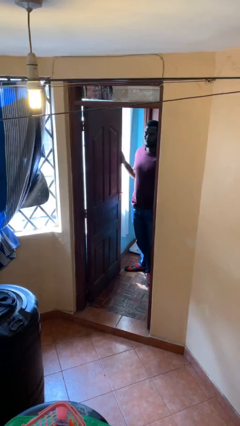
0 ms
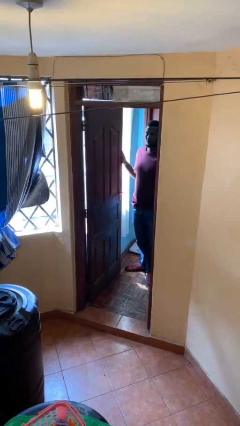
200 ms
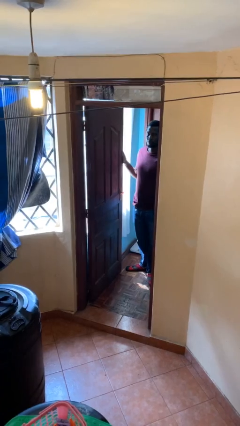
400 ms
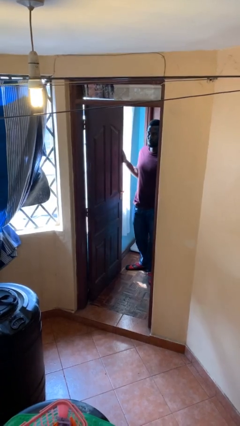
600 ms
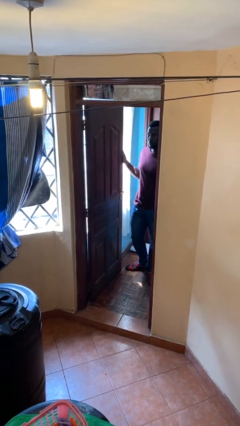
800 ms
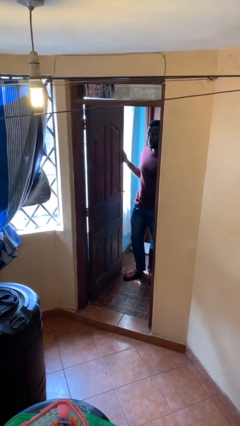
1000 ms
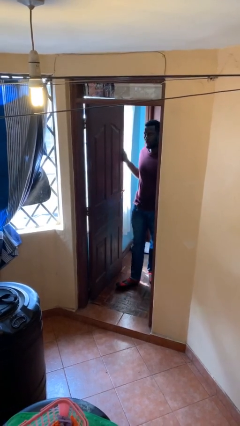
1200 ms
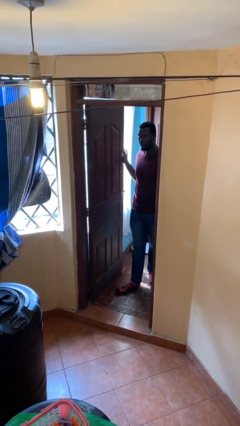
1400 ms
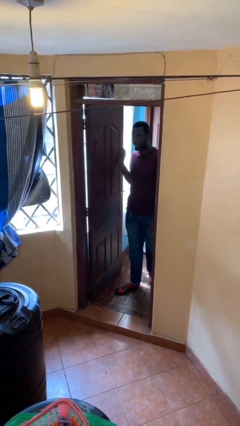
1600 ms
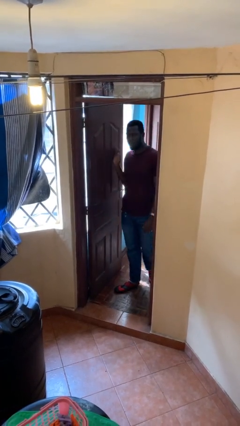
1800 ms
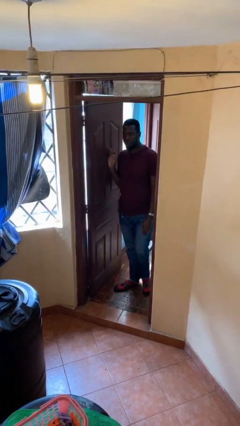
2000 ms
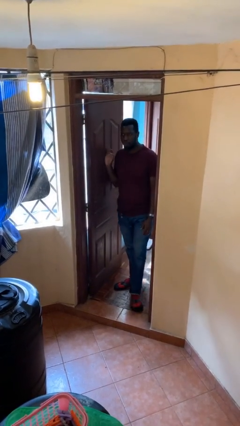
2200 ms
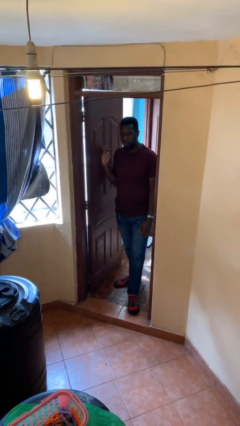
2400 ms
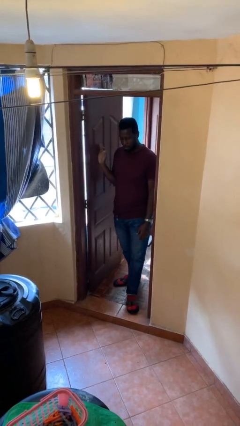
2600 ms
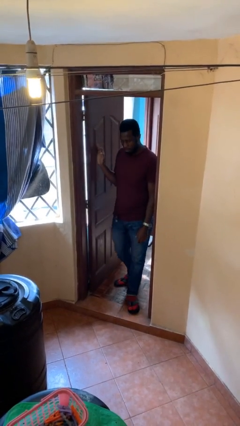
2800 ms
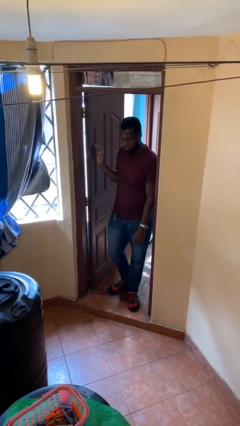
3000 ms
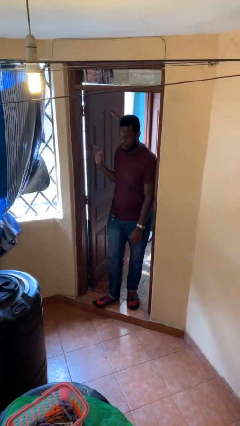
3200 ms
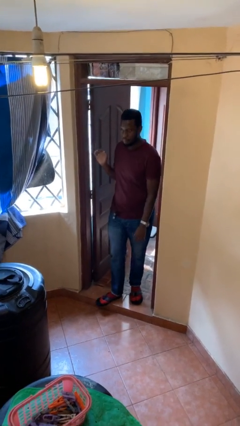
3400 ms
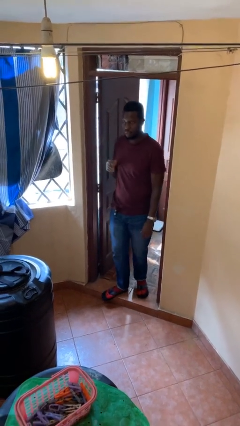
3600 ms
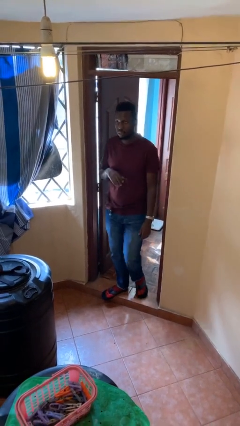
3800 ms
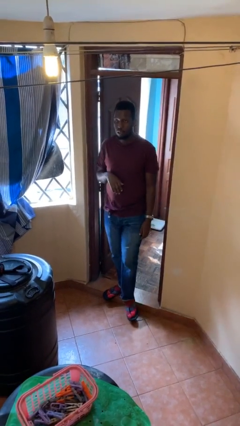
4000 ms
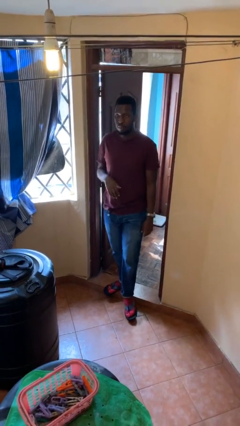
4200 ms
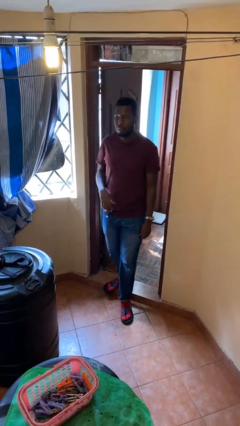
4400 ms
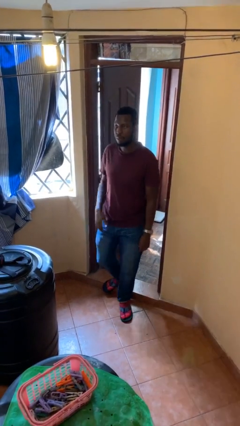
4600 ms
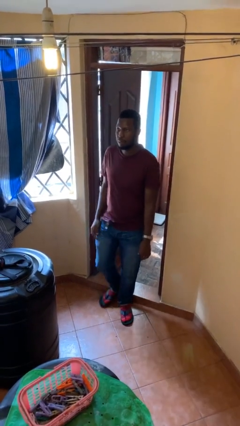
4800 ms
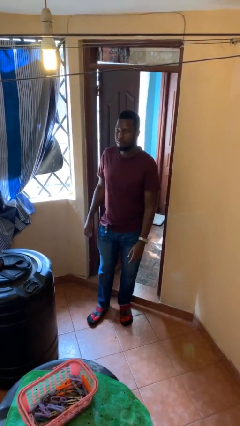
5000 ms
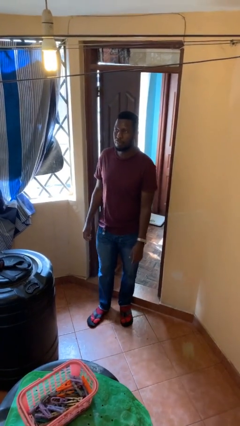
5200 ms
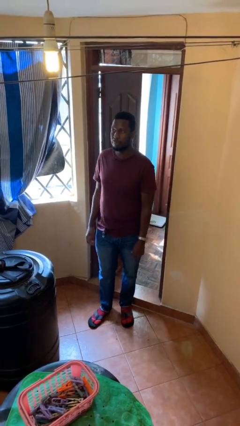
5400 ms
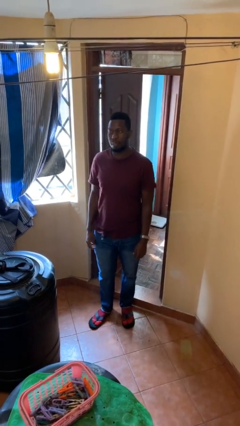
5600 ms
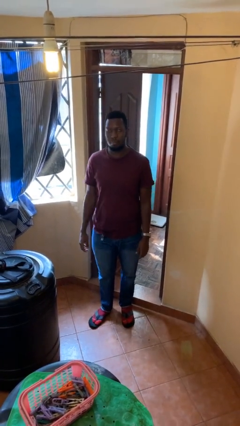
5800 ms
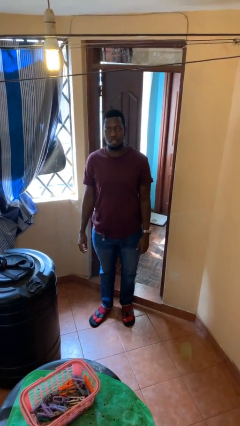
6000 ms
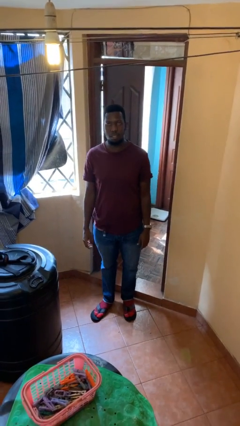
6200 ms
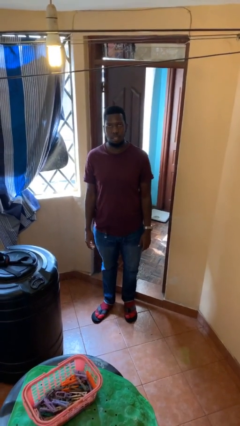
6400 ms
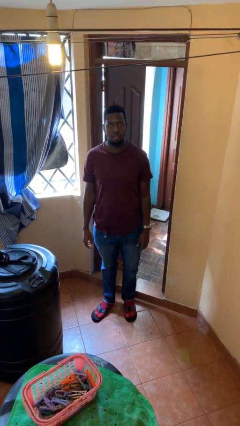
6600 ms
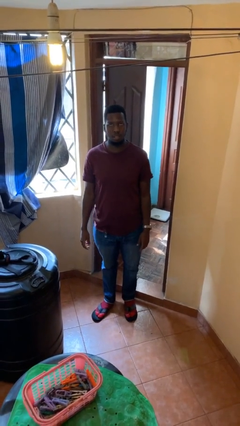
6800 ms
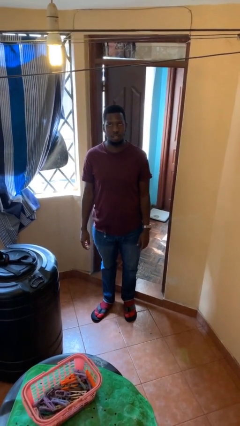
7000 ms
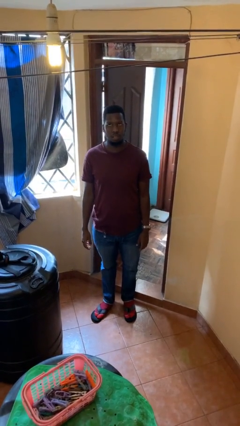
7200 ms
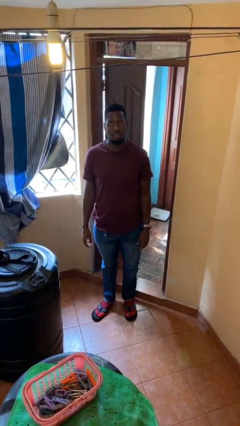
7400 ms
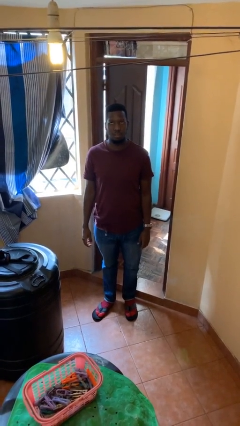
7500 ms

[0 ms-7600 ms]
person enters scene through structure

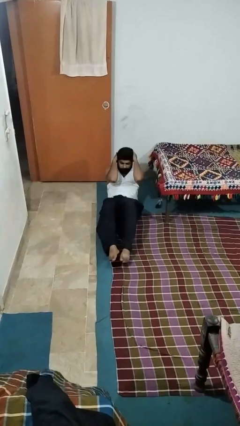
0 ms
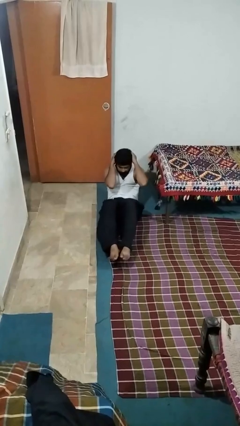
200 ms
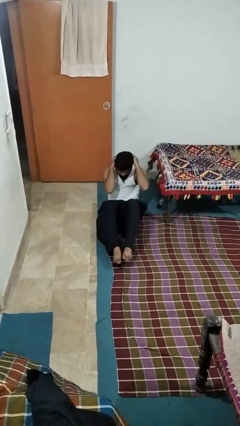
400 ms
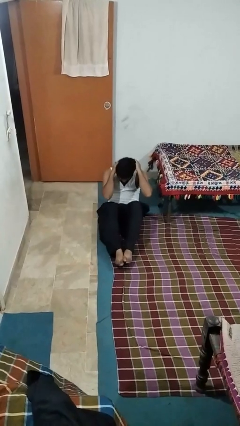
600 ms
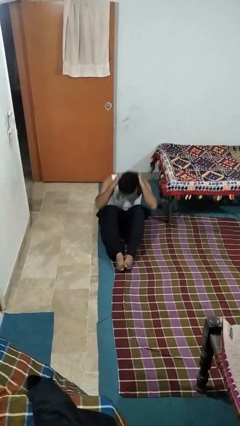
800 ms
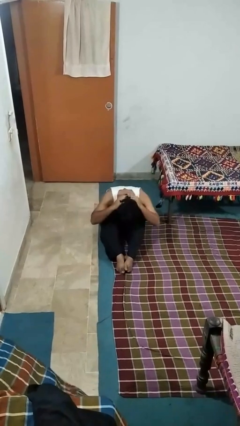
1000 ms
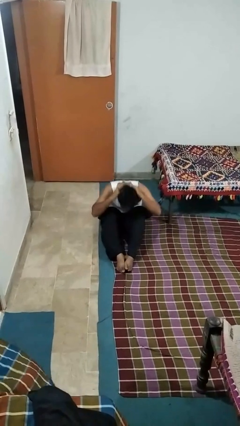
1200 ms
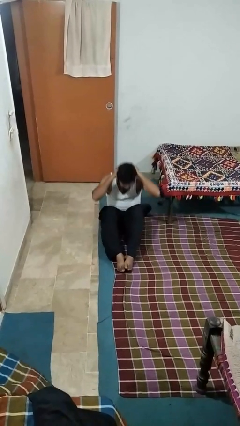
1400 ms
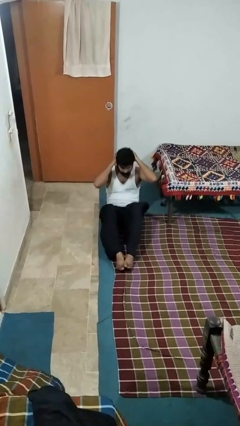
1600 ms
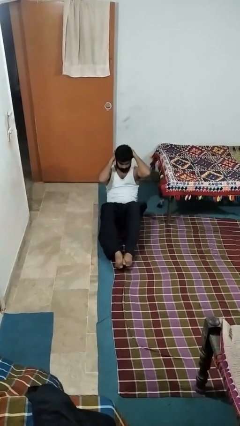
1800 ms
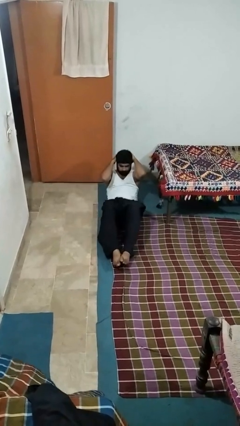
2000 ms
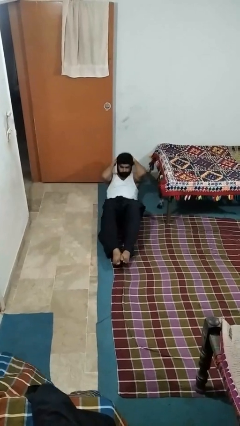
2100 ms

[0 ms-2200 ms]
person exercises with situp

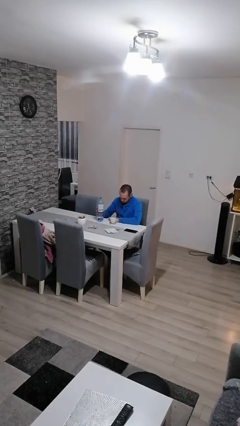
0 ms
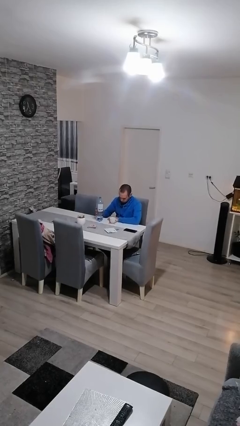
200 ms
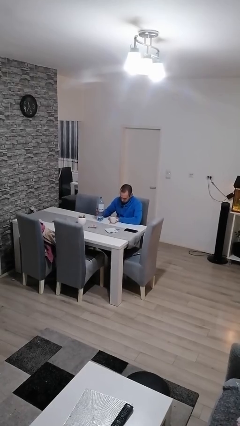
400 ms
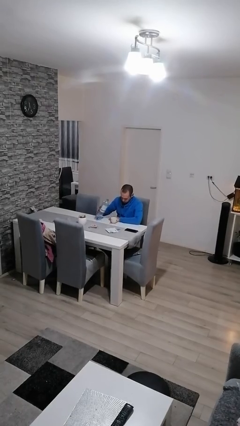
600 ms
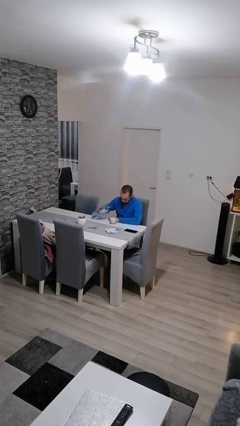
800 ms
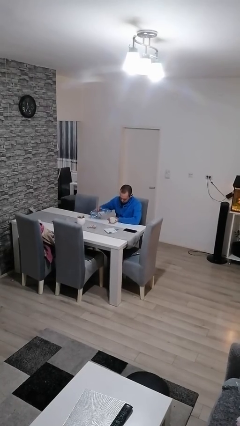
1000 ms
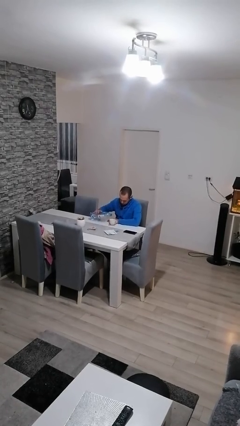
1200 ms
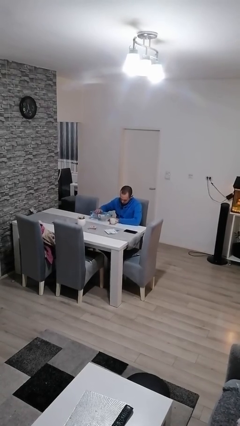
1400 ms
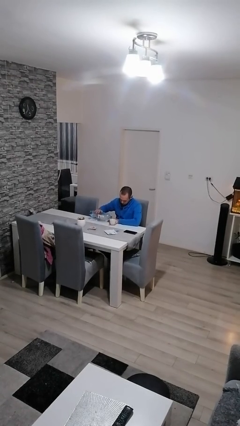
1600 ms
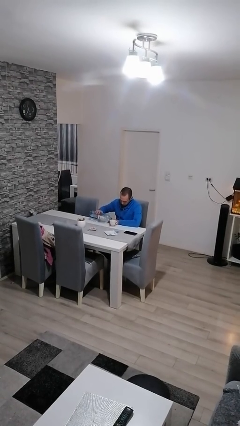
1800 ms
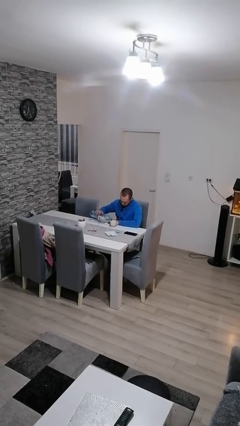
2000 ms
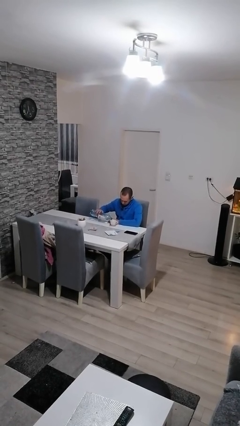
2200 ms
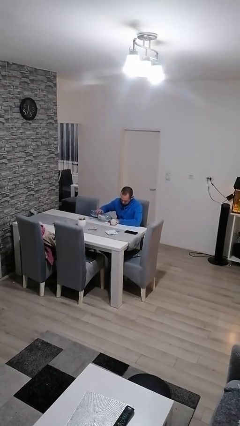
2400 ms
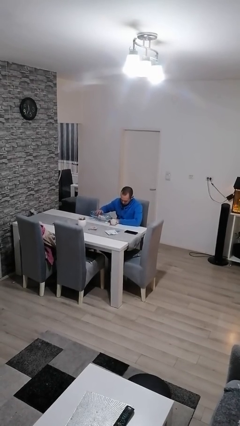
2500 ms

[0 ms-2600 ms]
person pours liquid into cup

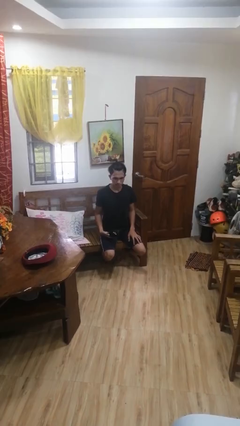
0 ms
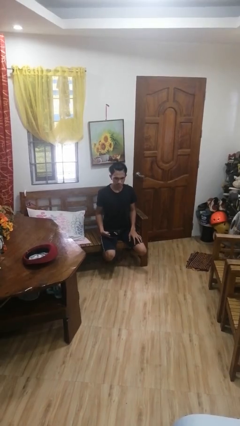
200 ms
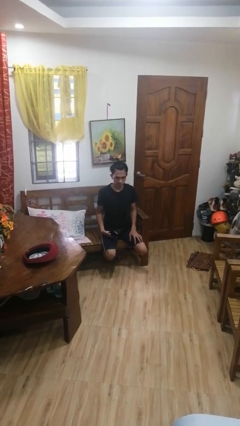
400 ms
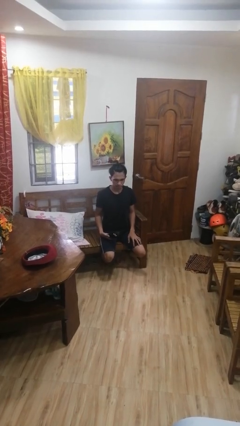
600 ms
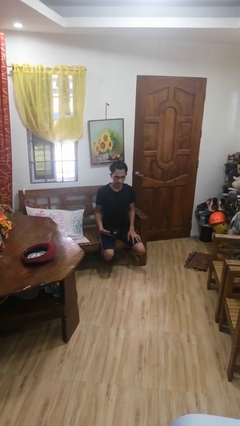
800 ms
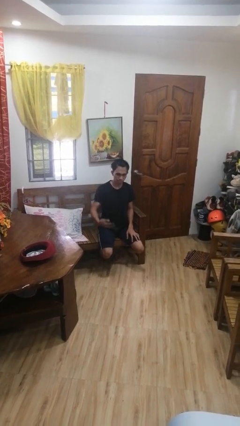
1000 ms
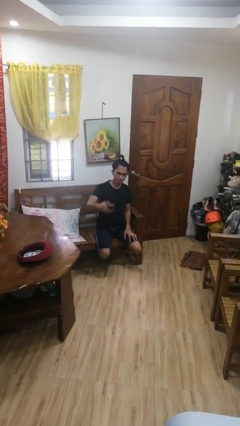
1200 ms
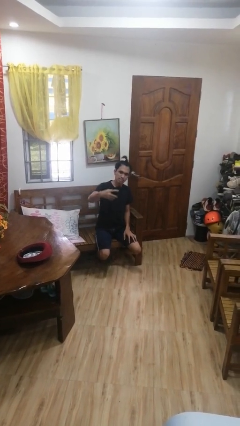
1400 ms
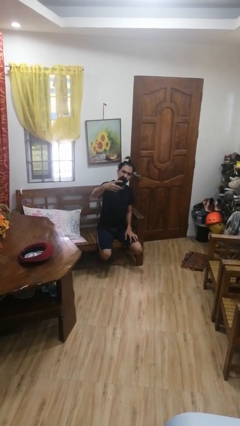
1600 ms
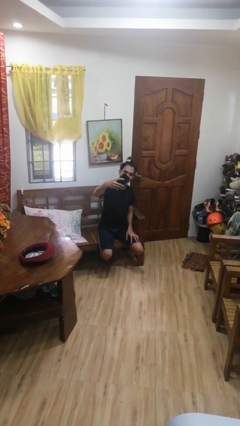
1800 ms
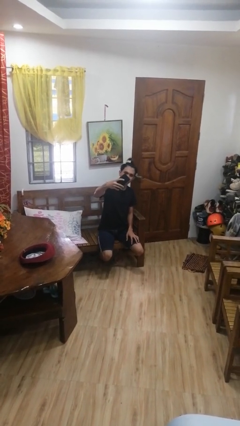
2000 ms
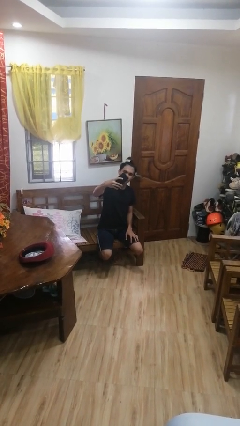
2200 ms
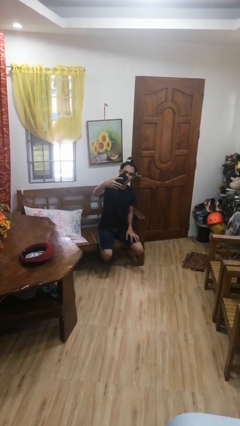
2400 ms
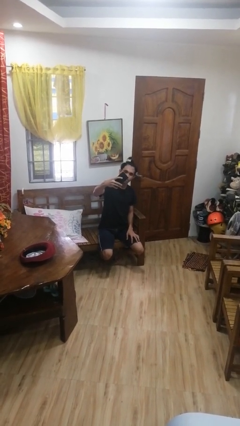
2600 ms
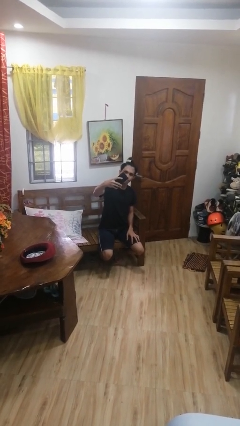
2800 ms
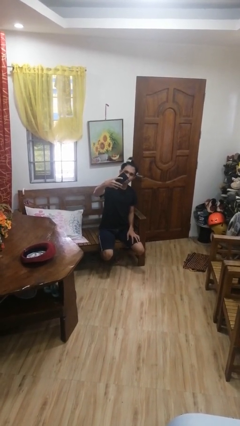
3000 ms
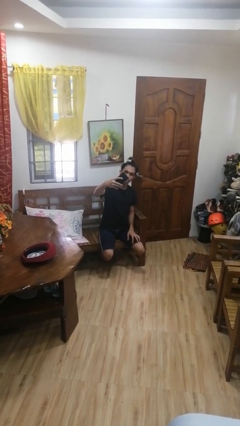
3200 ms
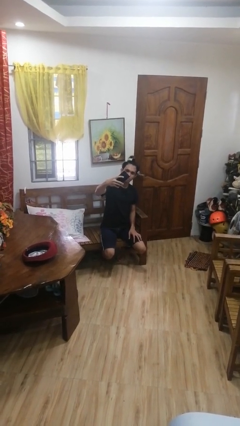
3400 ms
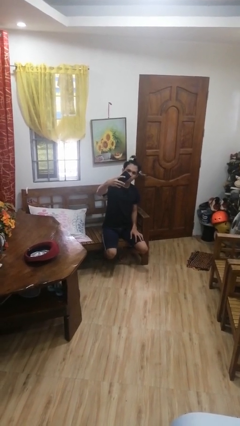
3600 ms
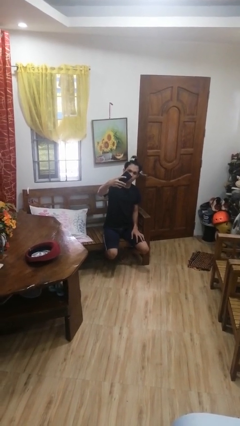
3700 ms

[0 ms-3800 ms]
person takes selfie

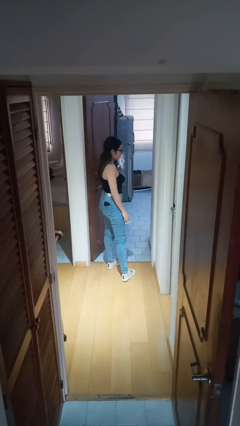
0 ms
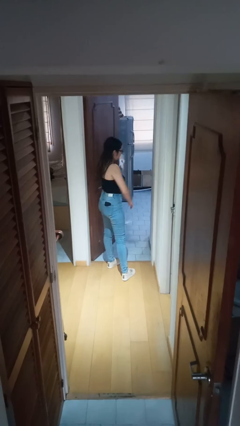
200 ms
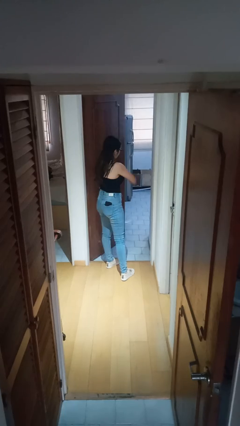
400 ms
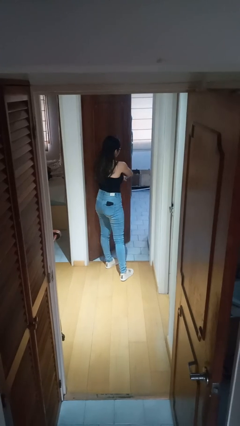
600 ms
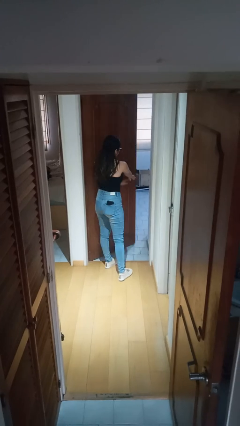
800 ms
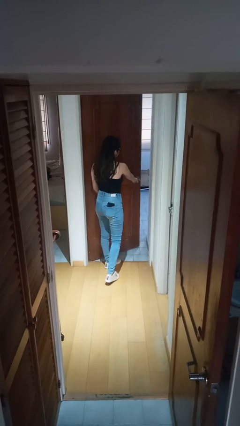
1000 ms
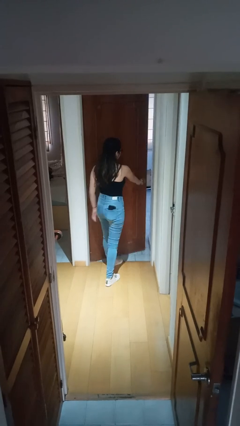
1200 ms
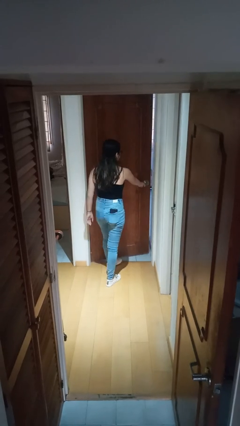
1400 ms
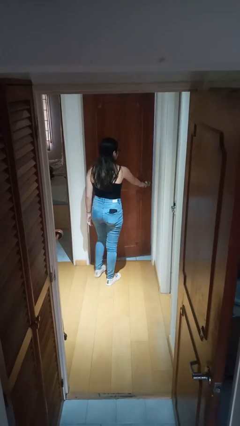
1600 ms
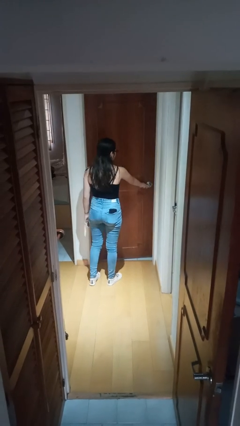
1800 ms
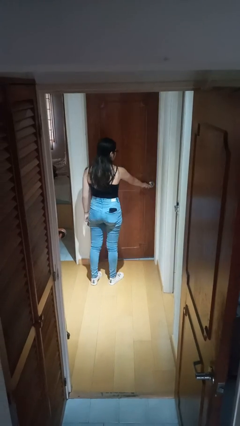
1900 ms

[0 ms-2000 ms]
person closes facility door
